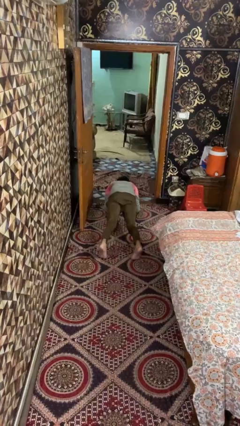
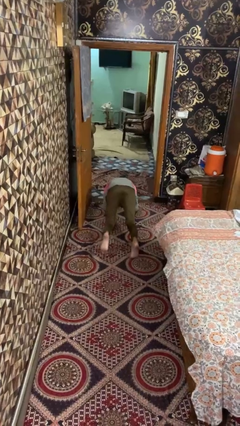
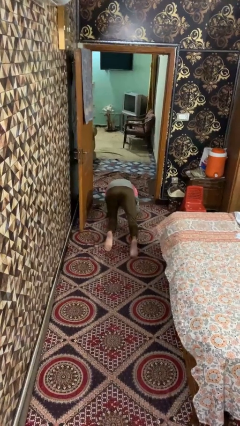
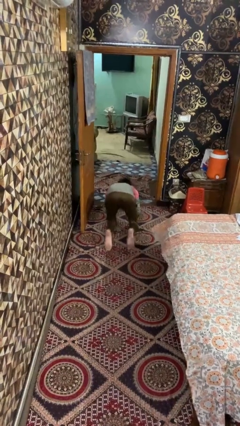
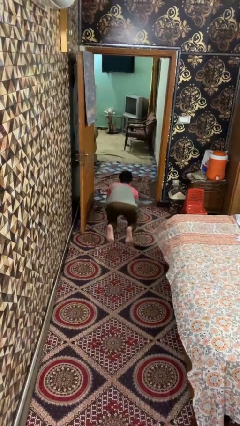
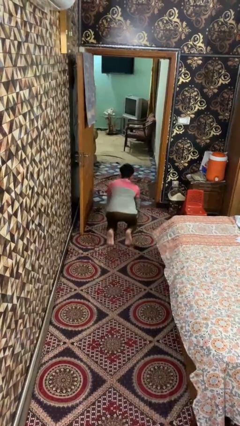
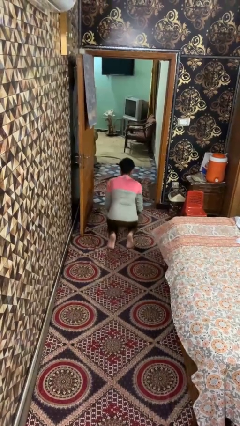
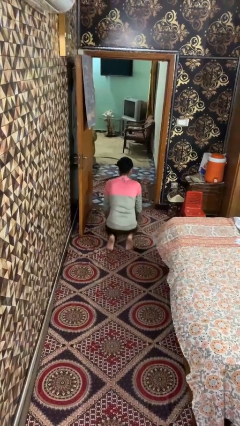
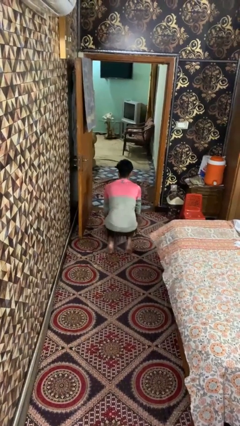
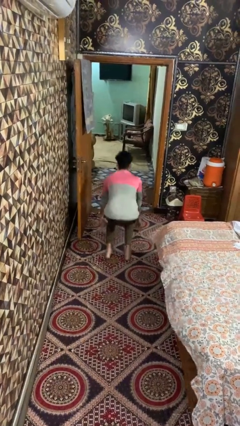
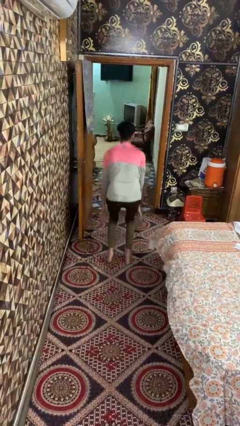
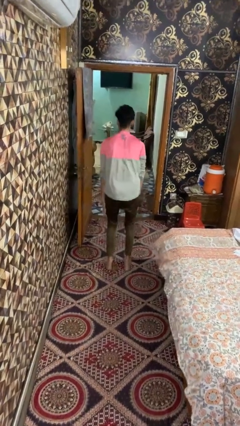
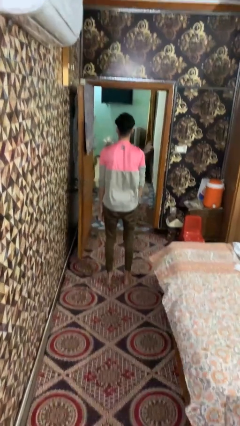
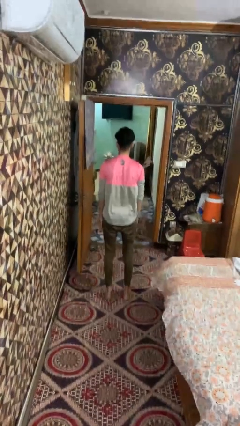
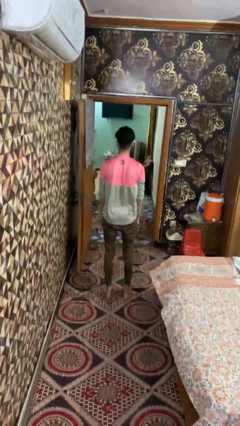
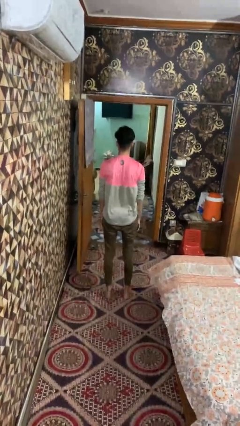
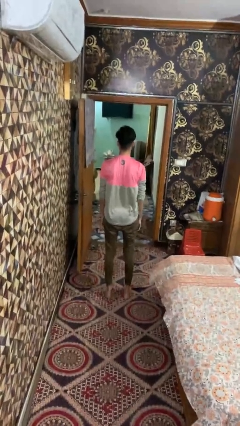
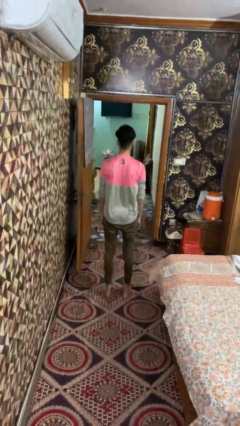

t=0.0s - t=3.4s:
person stands up from floor

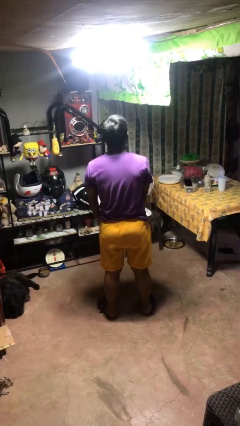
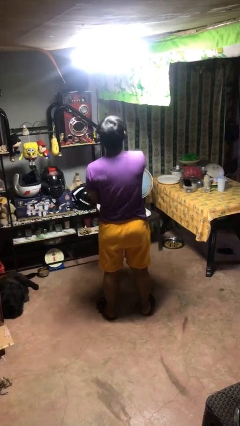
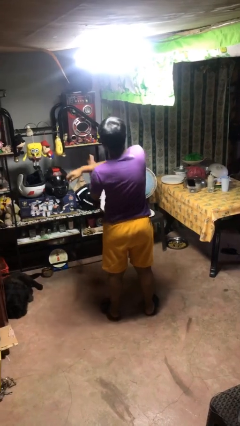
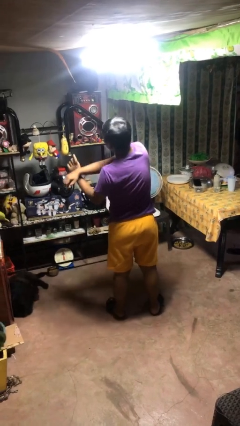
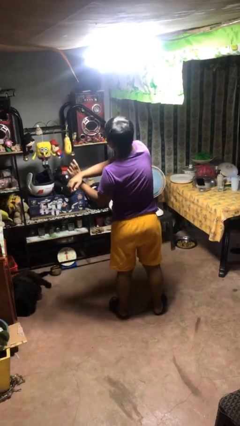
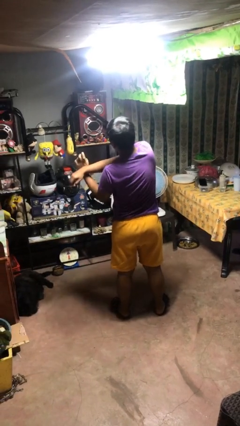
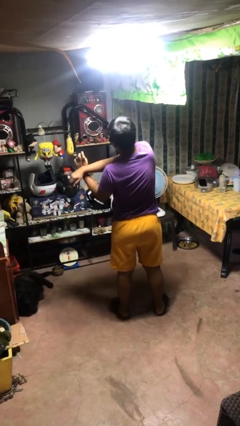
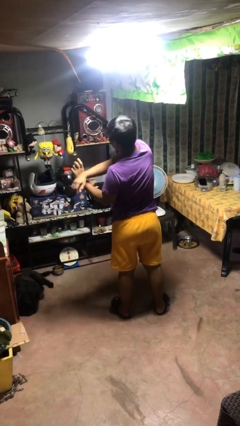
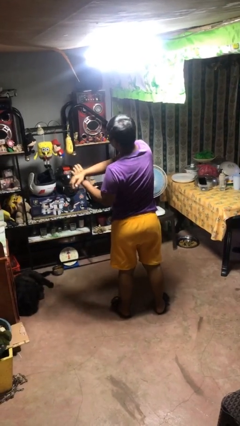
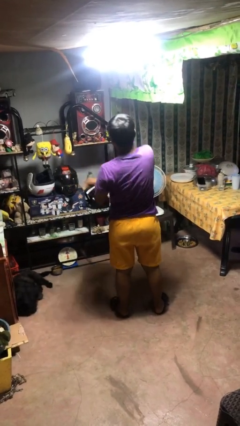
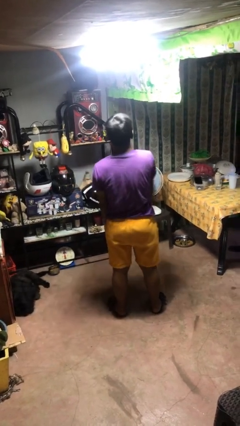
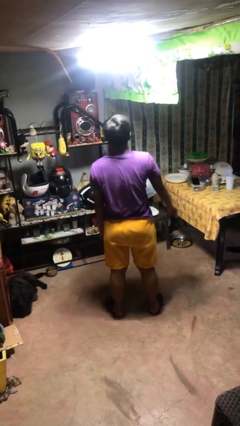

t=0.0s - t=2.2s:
person crosses arms

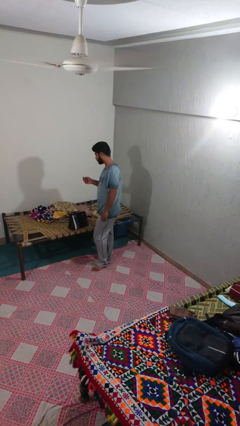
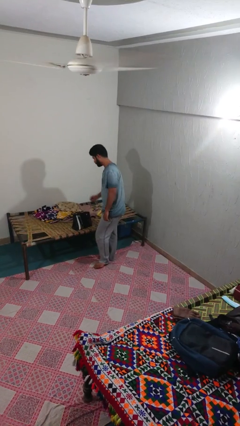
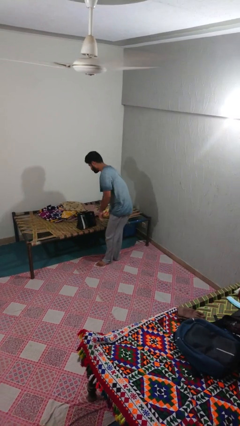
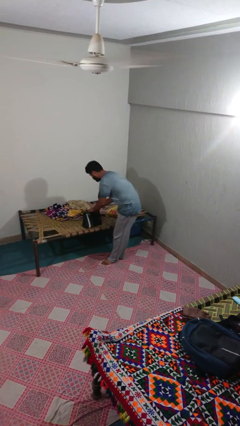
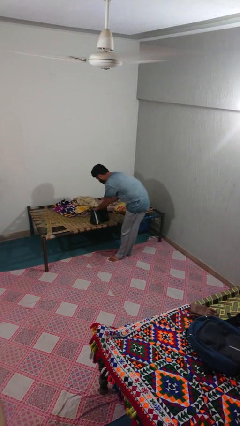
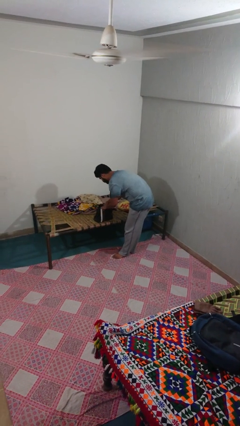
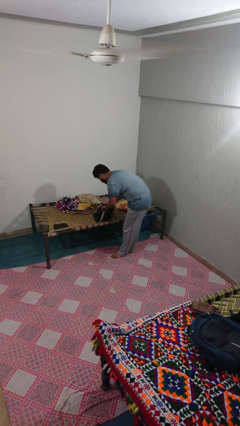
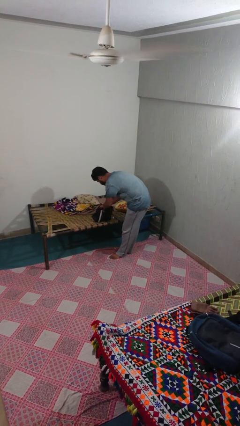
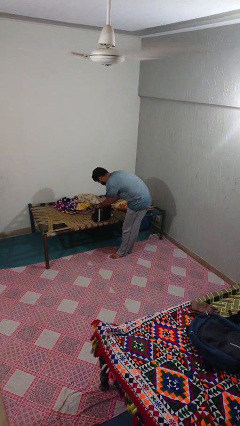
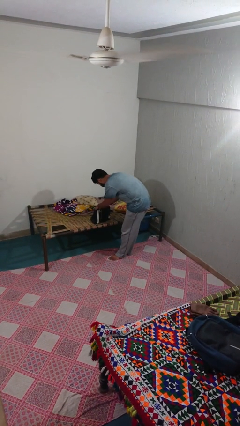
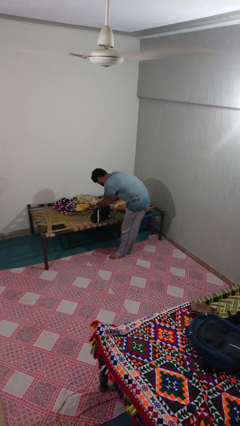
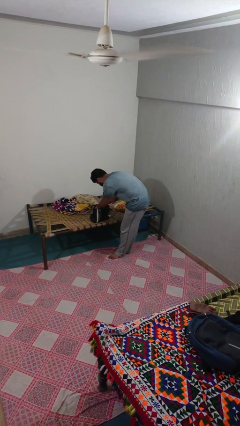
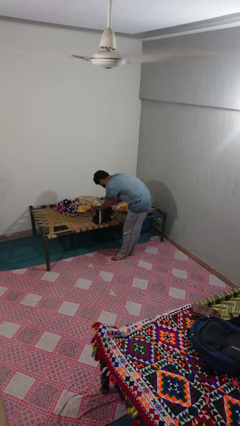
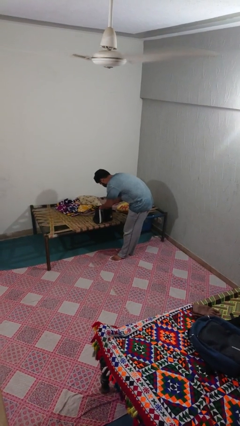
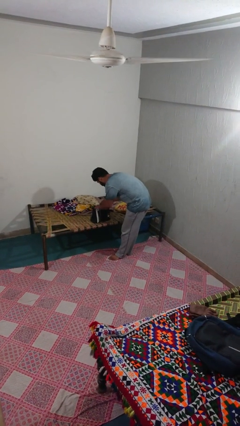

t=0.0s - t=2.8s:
person searches in purse

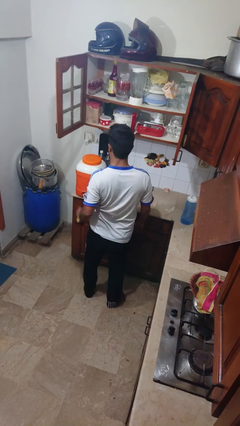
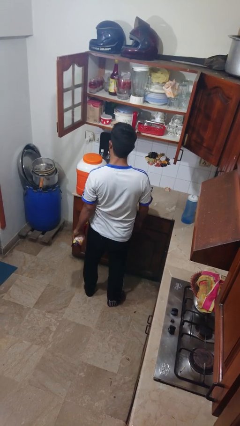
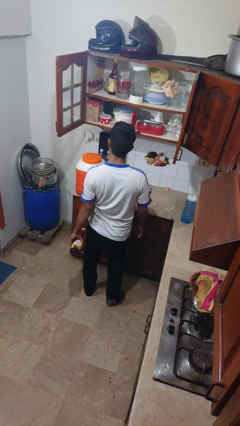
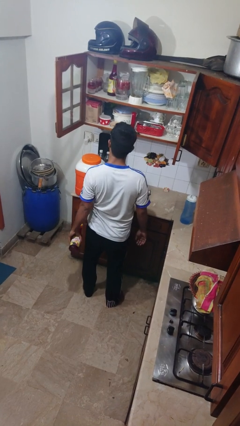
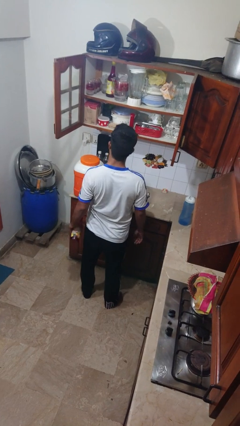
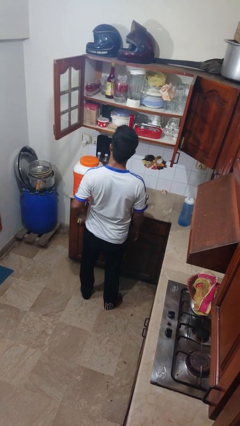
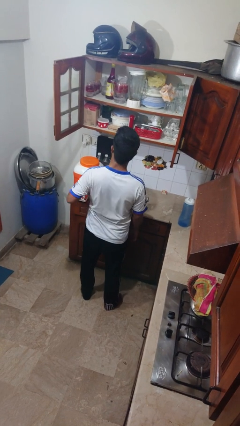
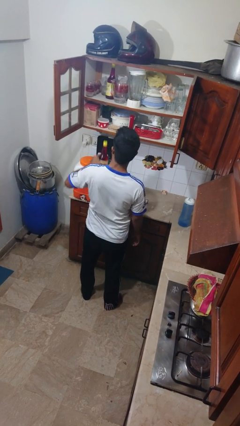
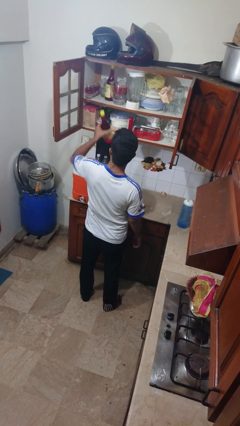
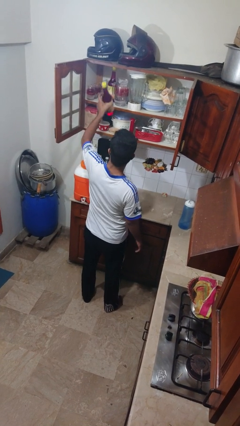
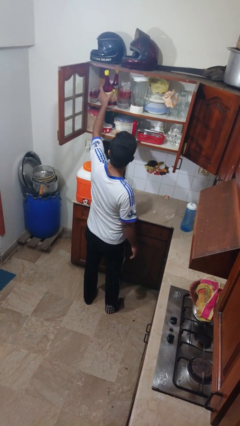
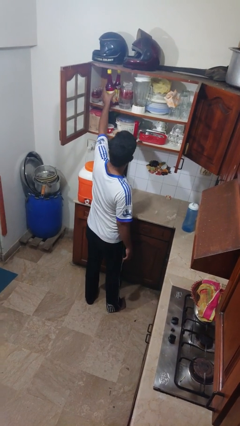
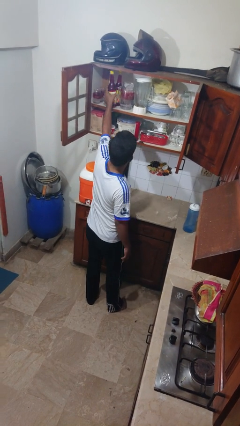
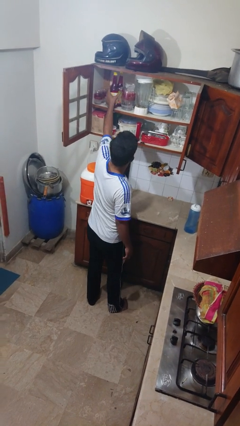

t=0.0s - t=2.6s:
person puts down object into cabinet

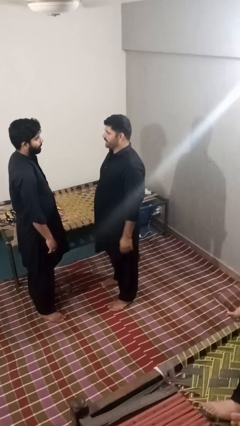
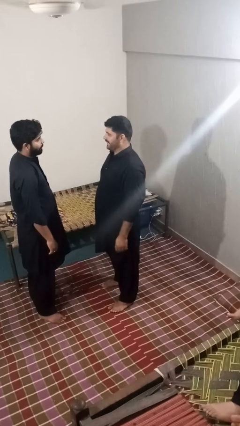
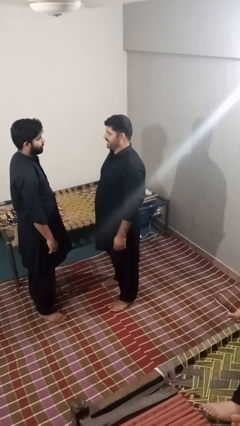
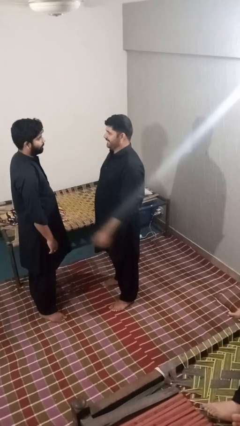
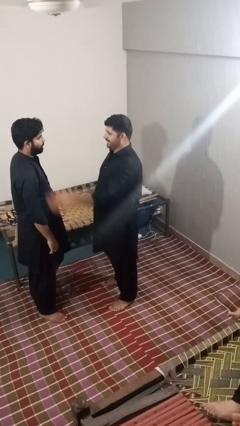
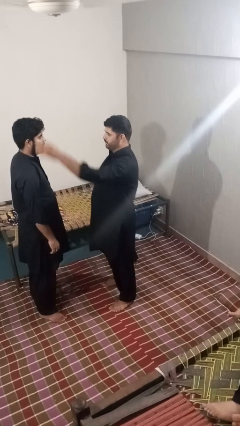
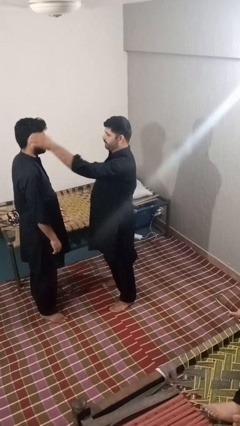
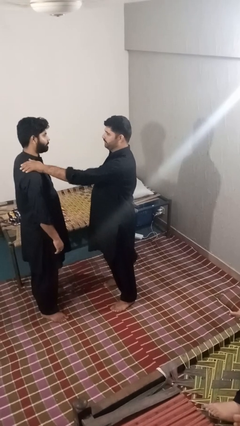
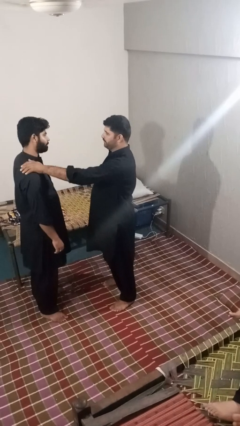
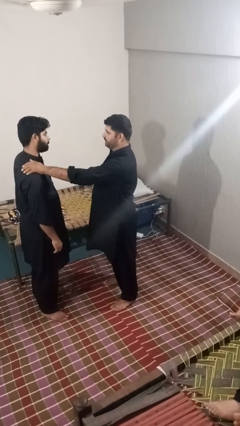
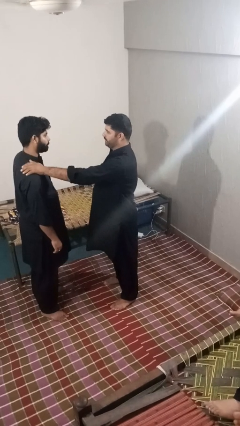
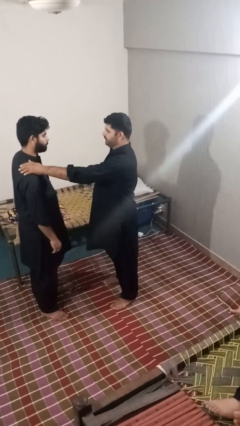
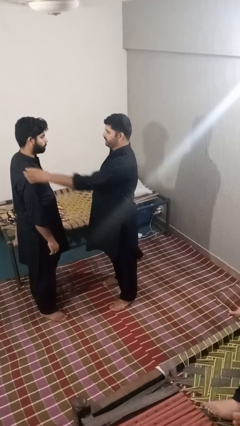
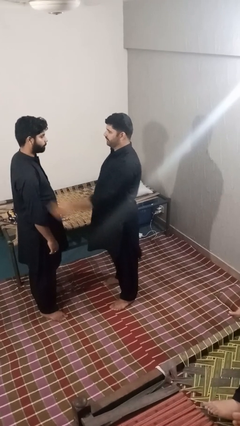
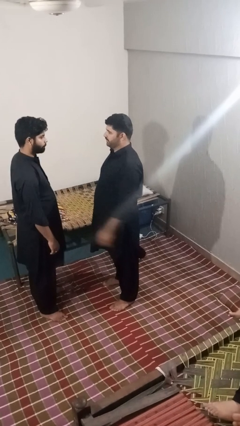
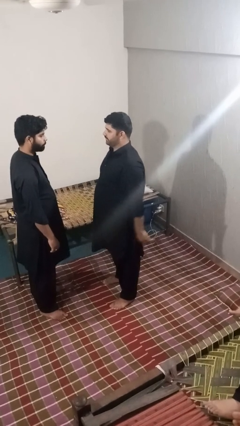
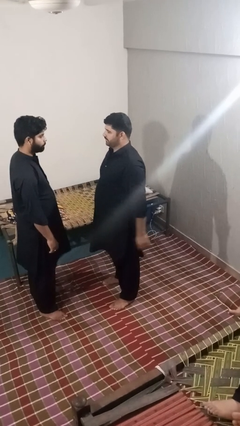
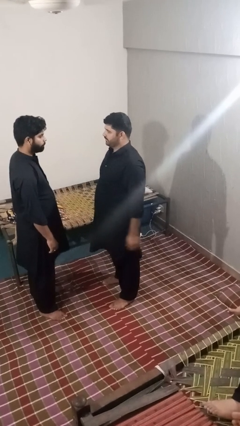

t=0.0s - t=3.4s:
person pounds shoulders of person

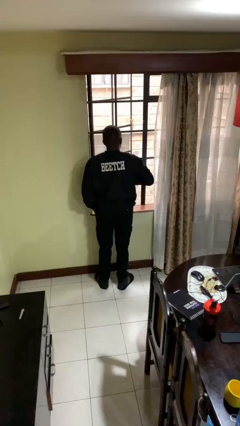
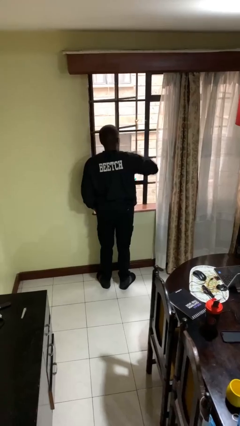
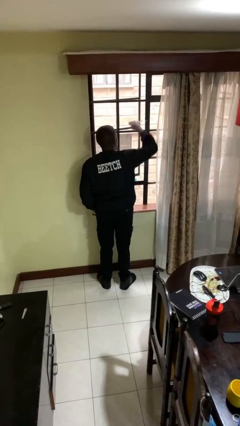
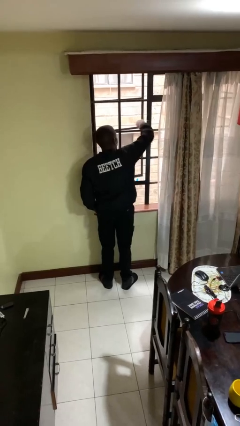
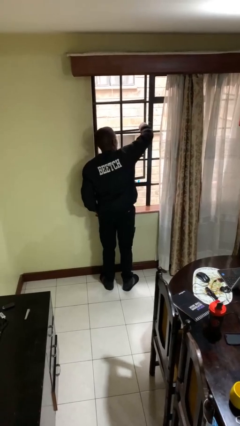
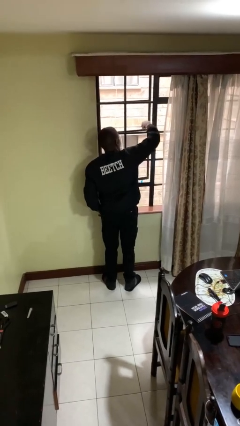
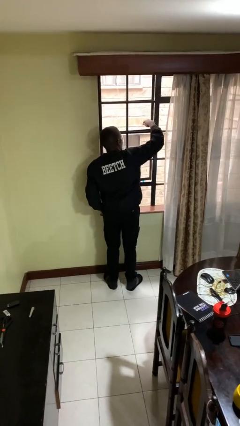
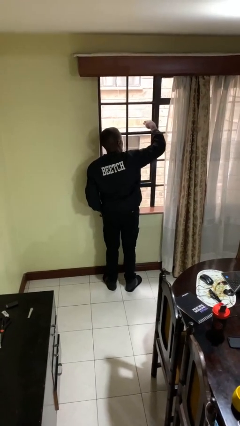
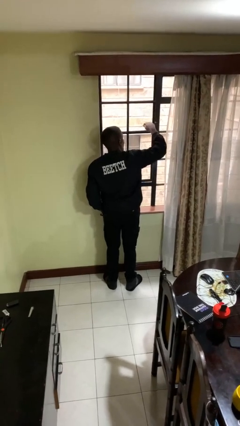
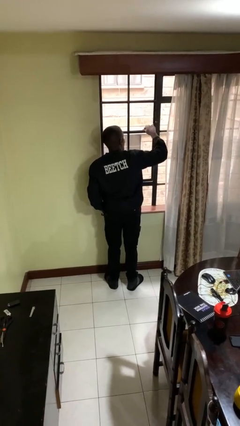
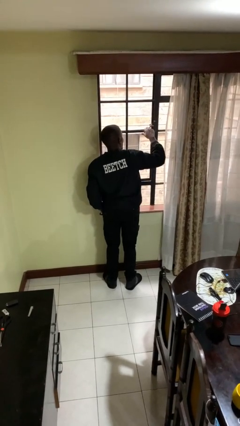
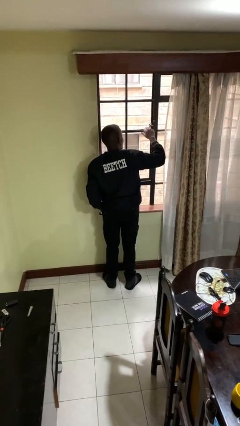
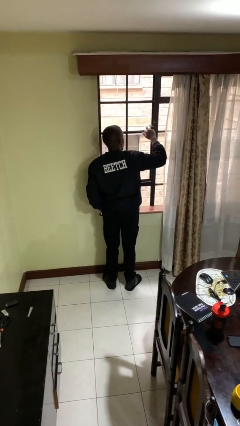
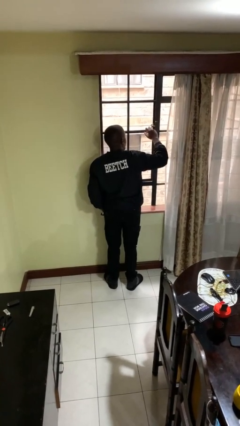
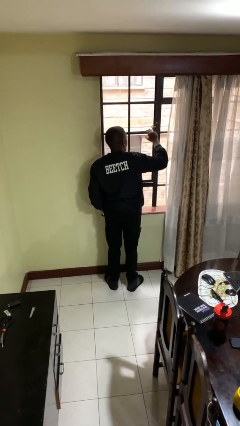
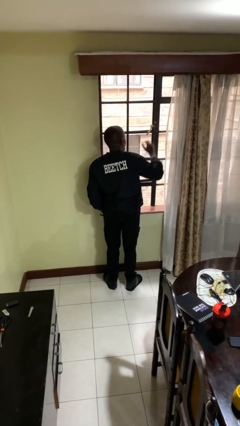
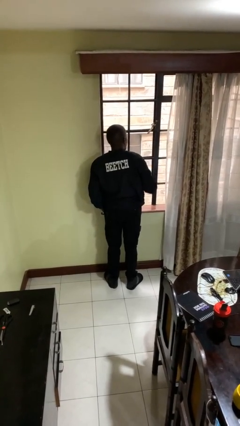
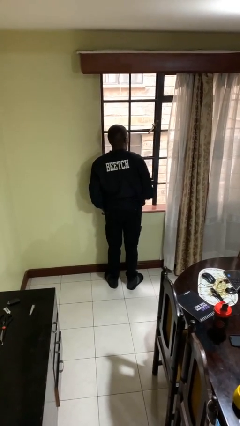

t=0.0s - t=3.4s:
person closes home window
